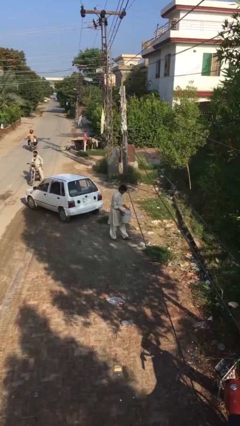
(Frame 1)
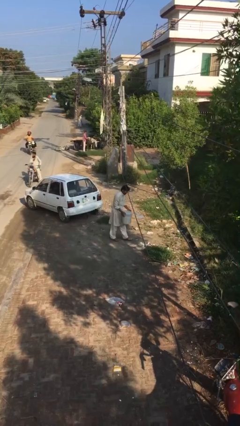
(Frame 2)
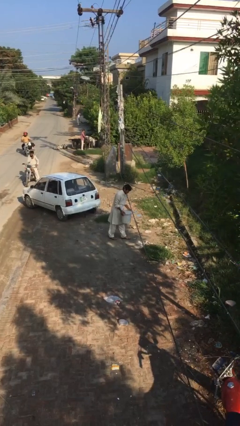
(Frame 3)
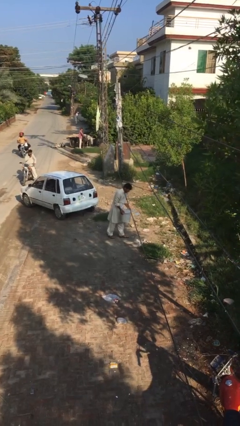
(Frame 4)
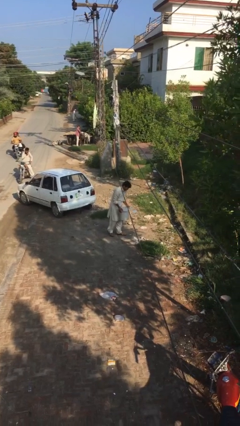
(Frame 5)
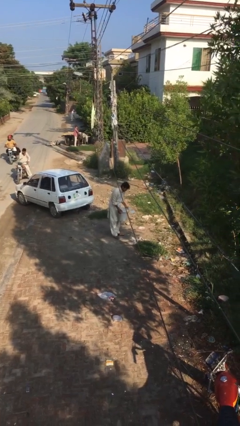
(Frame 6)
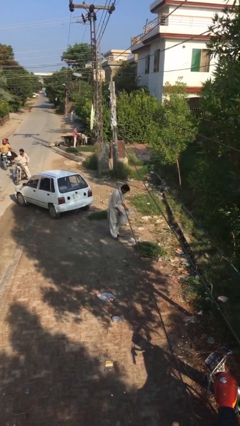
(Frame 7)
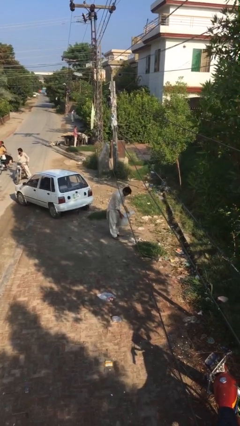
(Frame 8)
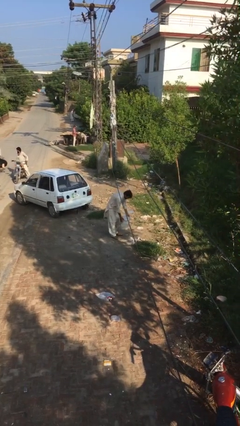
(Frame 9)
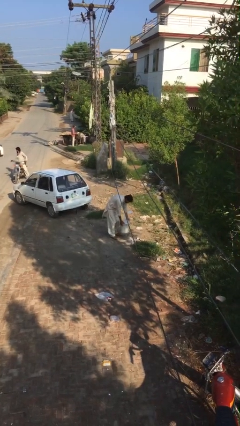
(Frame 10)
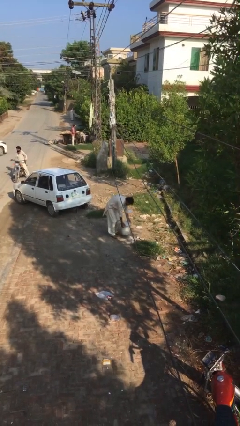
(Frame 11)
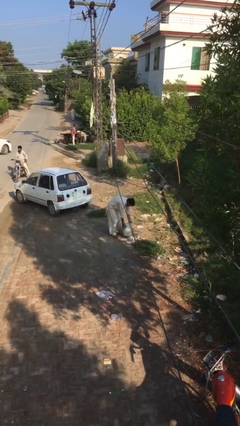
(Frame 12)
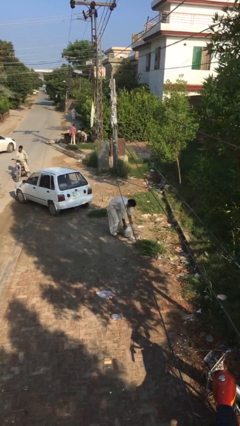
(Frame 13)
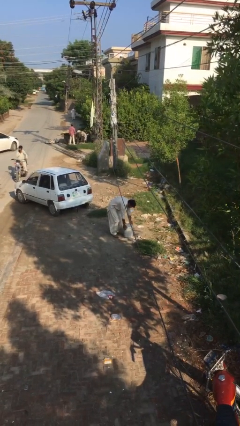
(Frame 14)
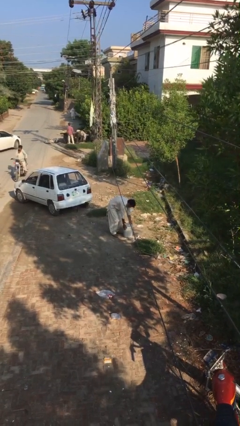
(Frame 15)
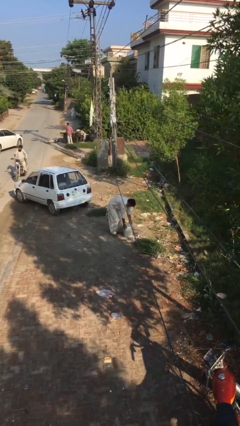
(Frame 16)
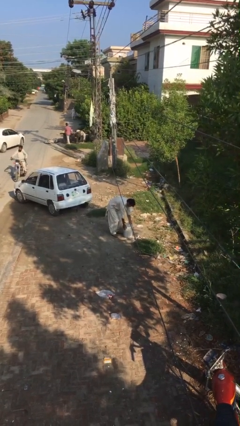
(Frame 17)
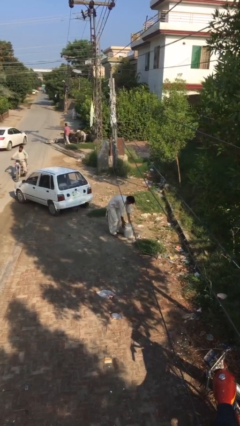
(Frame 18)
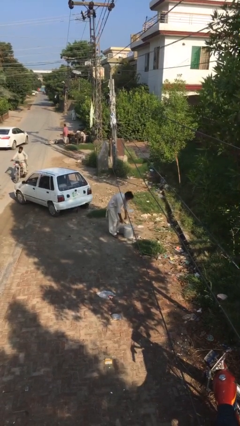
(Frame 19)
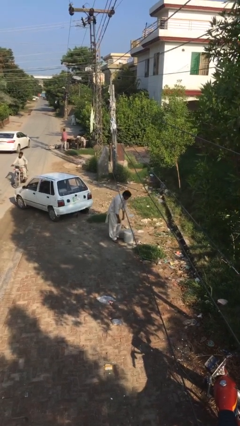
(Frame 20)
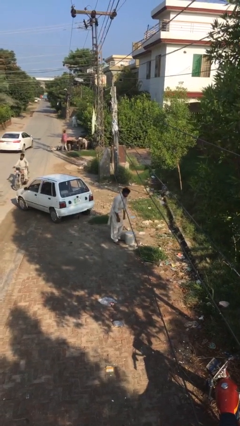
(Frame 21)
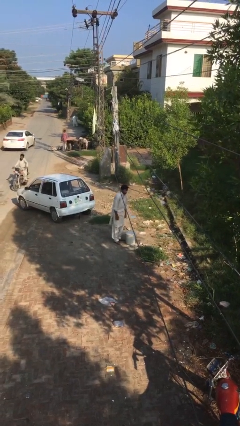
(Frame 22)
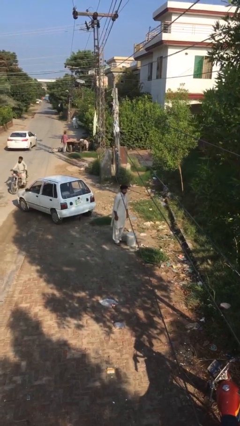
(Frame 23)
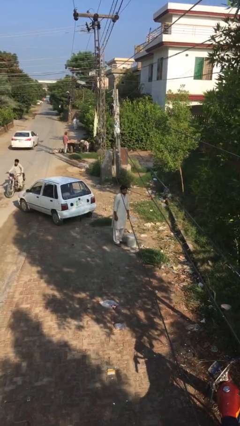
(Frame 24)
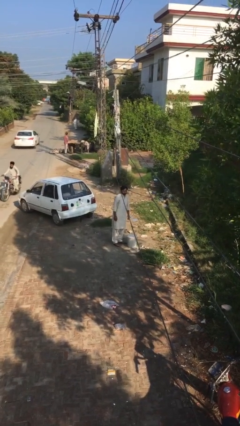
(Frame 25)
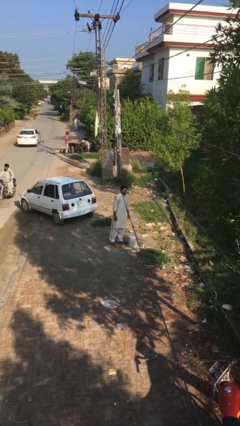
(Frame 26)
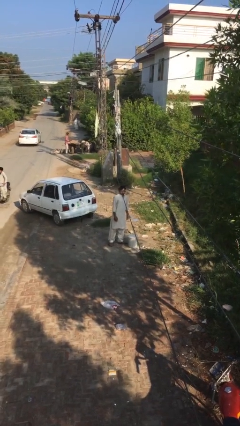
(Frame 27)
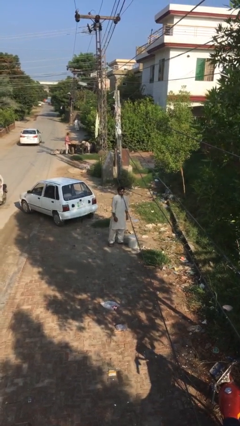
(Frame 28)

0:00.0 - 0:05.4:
person puts down object on floor

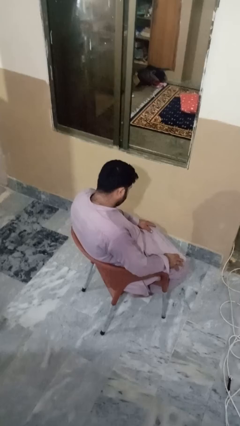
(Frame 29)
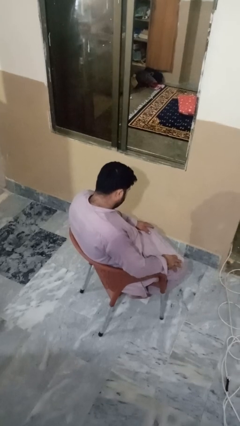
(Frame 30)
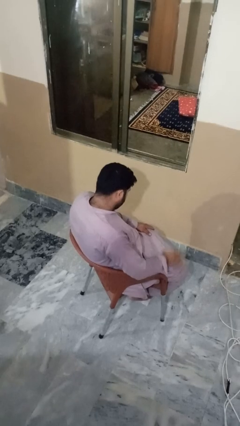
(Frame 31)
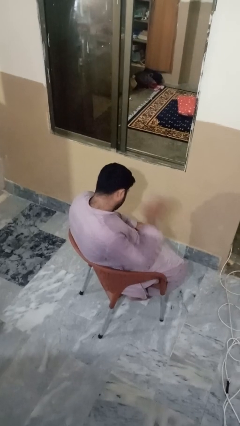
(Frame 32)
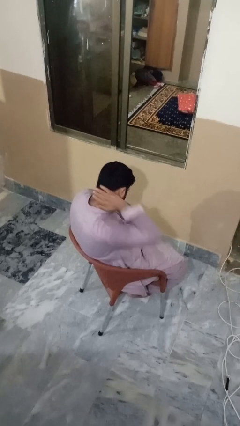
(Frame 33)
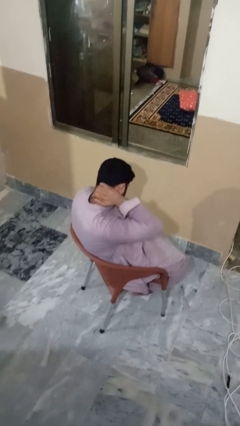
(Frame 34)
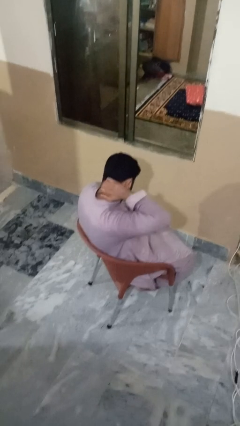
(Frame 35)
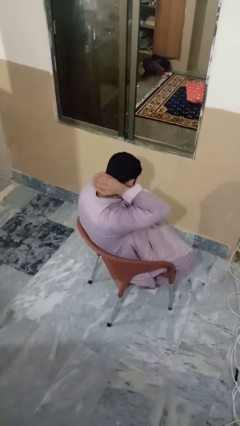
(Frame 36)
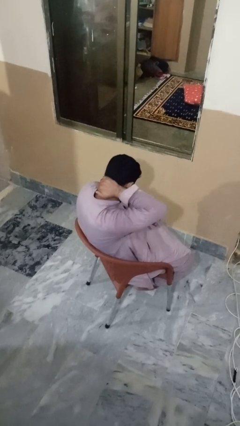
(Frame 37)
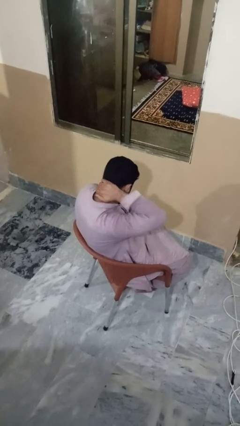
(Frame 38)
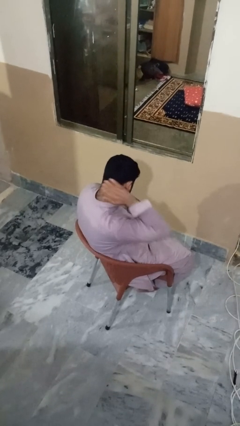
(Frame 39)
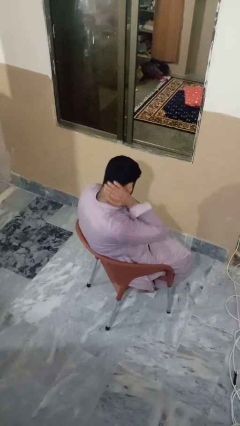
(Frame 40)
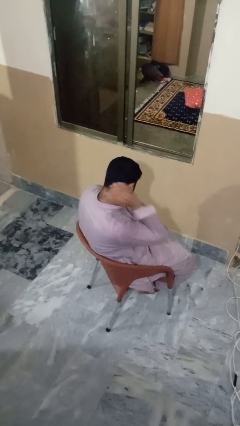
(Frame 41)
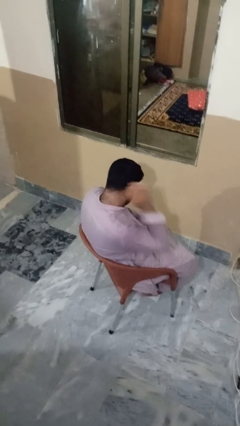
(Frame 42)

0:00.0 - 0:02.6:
person rubs neck

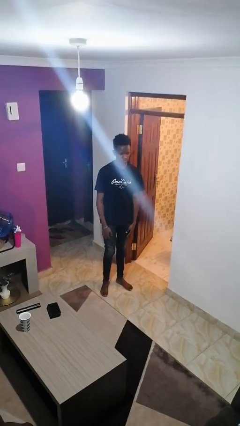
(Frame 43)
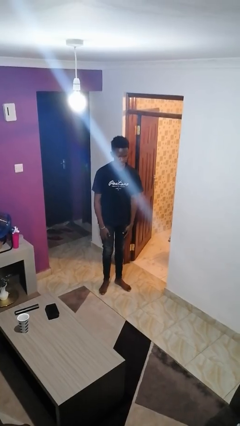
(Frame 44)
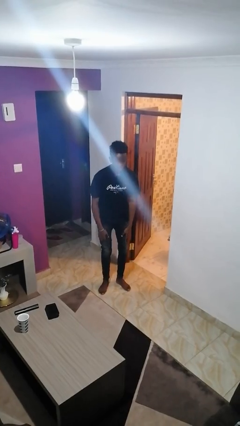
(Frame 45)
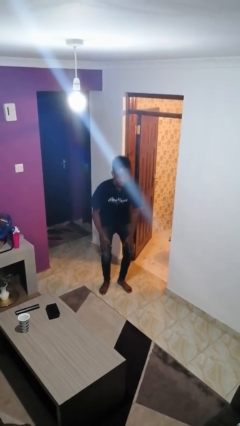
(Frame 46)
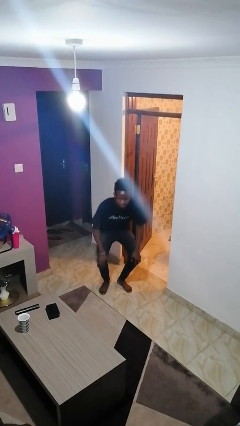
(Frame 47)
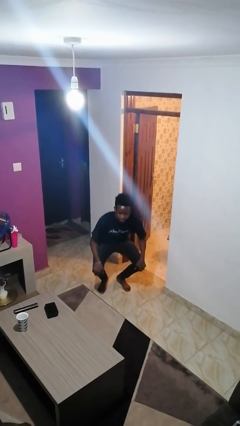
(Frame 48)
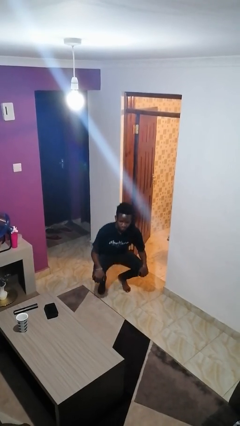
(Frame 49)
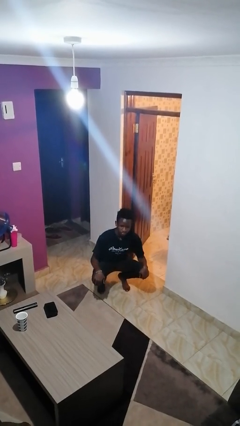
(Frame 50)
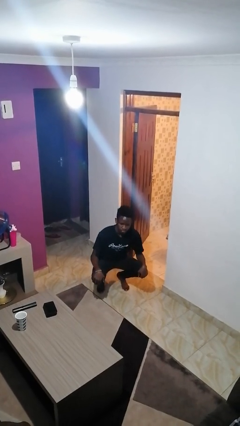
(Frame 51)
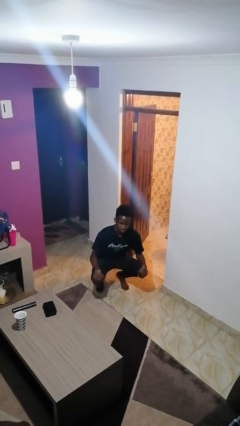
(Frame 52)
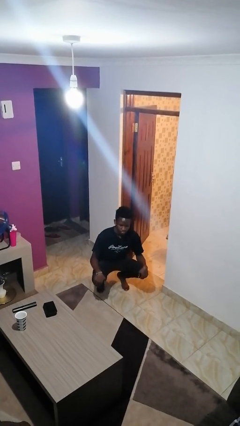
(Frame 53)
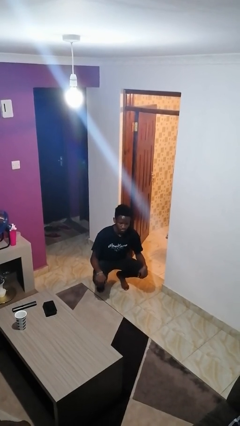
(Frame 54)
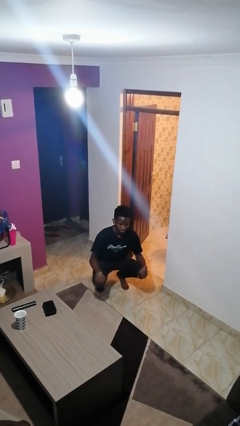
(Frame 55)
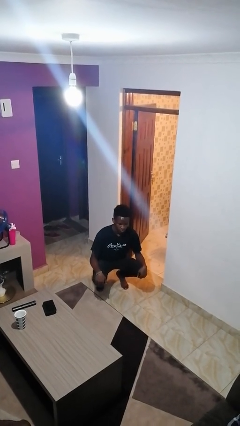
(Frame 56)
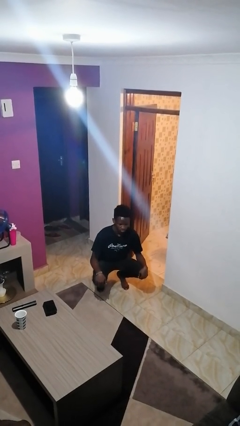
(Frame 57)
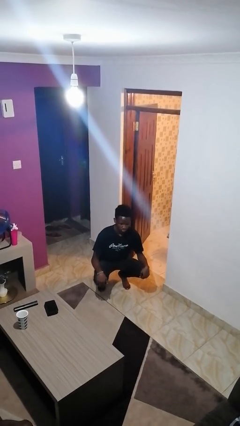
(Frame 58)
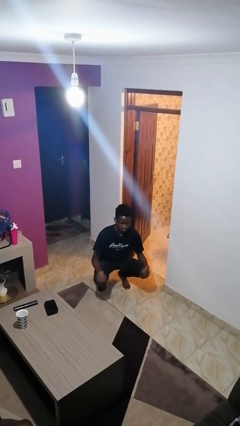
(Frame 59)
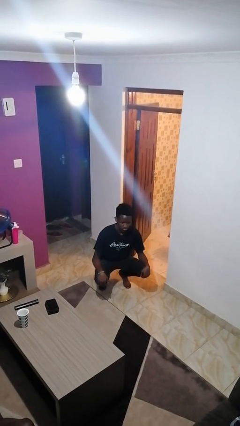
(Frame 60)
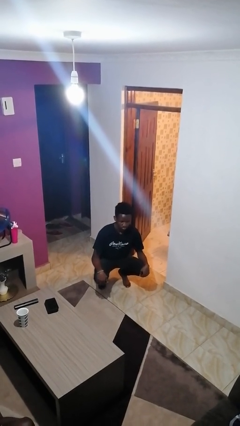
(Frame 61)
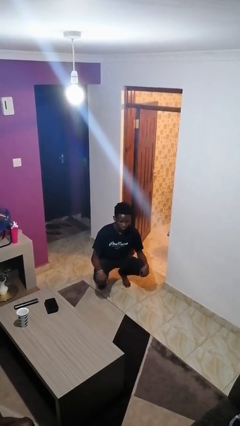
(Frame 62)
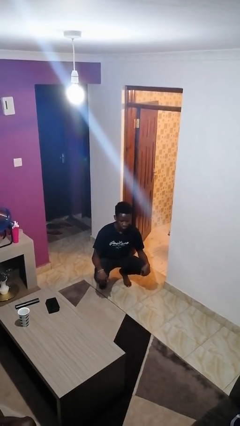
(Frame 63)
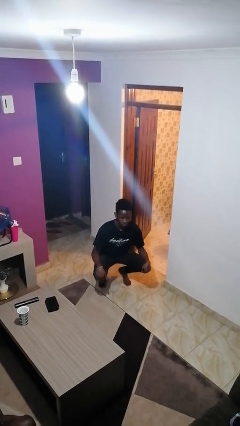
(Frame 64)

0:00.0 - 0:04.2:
person squats

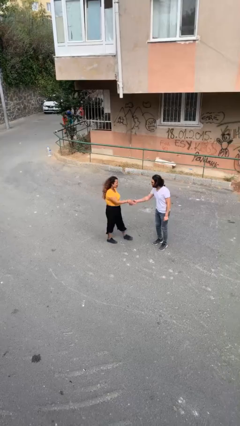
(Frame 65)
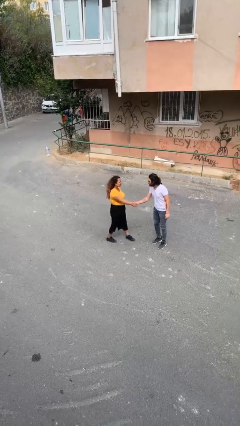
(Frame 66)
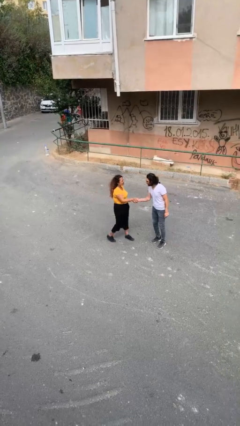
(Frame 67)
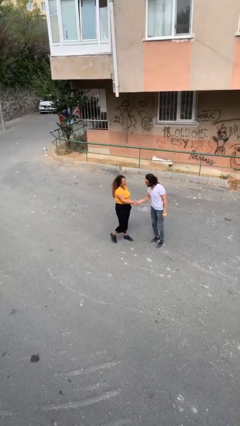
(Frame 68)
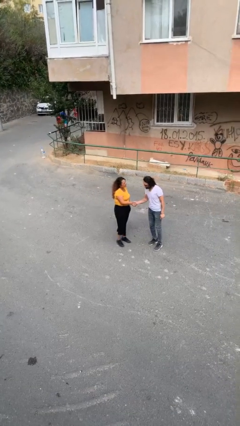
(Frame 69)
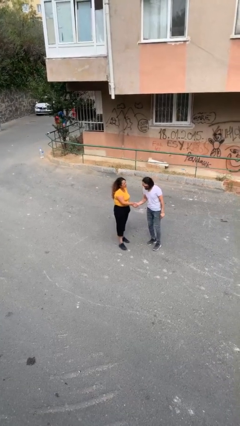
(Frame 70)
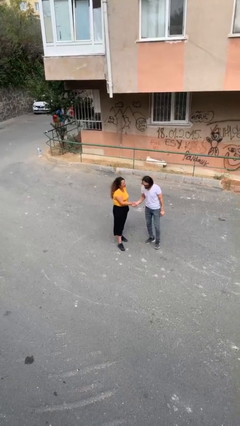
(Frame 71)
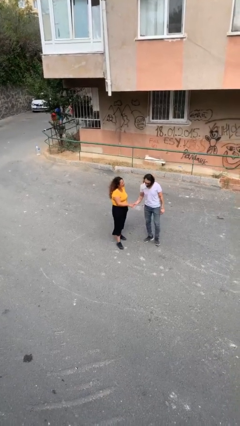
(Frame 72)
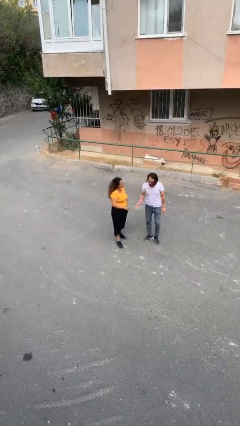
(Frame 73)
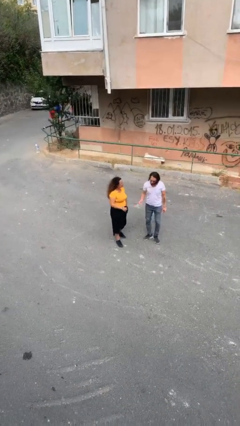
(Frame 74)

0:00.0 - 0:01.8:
person shakes hand

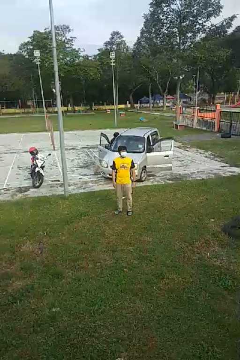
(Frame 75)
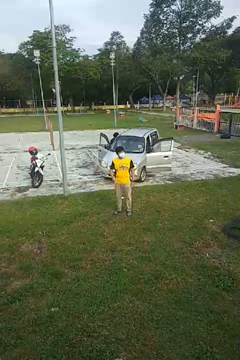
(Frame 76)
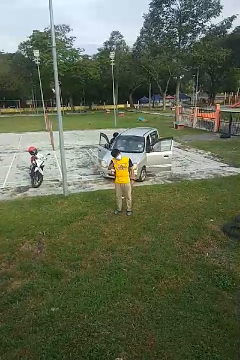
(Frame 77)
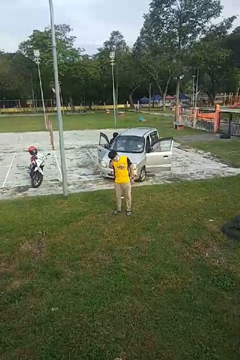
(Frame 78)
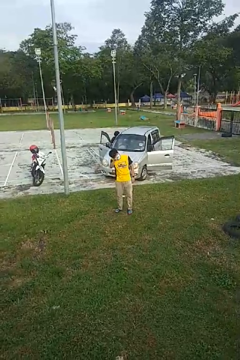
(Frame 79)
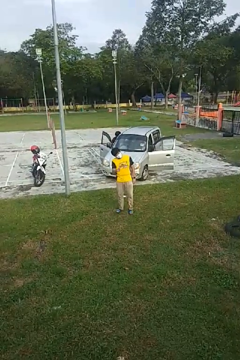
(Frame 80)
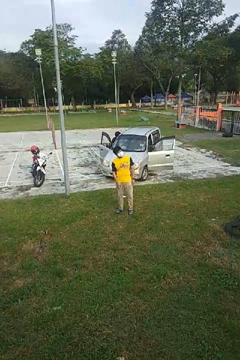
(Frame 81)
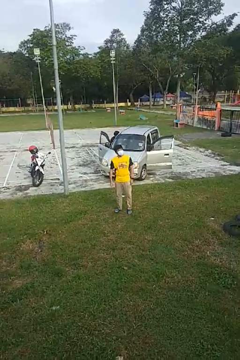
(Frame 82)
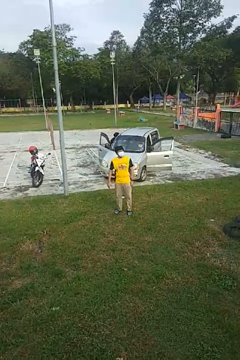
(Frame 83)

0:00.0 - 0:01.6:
person points at person

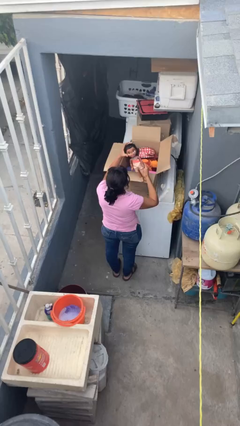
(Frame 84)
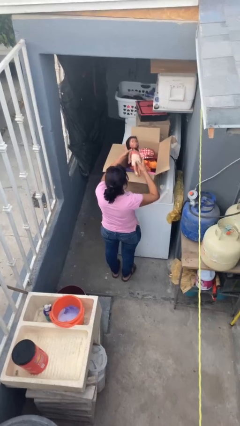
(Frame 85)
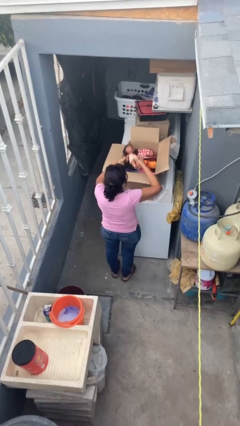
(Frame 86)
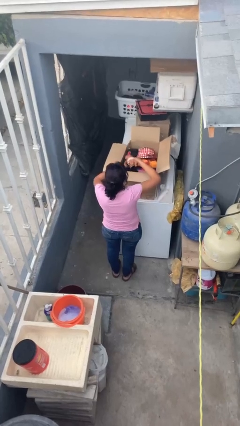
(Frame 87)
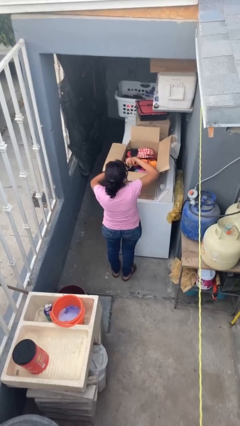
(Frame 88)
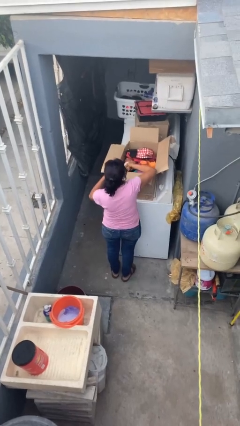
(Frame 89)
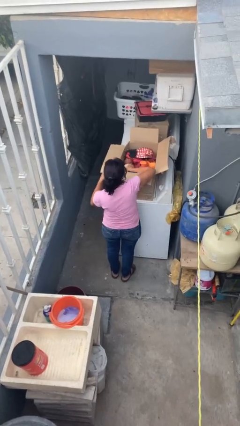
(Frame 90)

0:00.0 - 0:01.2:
person puts object into box

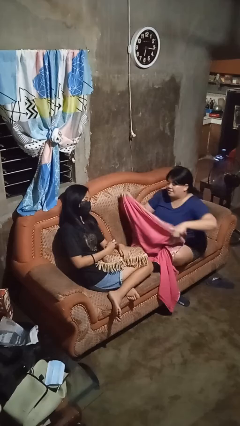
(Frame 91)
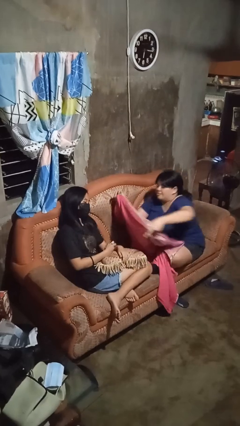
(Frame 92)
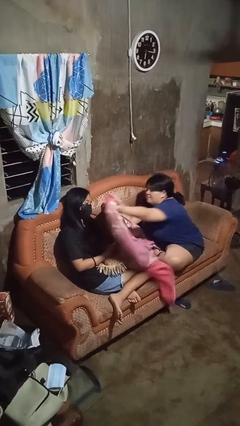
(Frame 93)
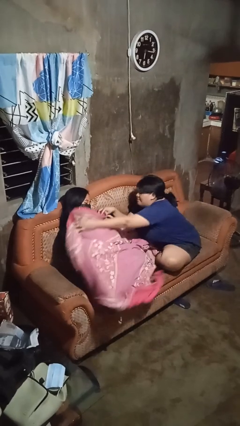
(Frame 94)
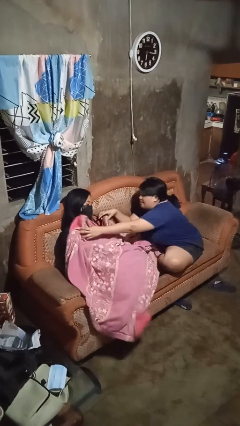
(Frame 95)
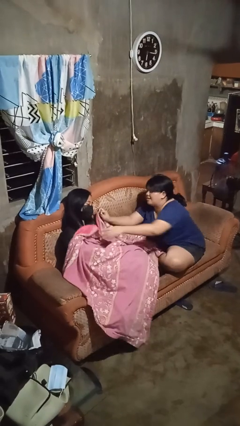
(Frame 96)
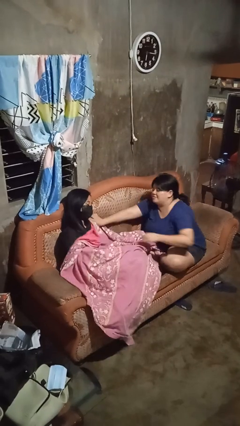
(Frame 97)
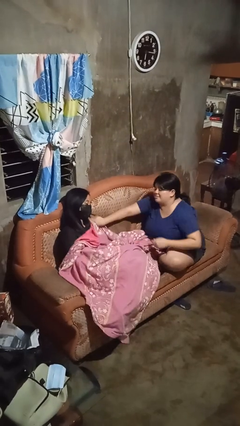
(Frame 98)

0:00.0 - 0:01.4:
person covers friend with blanket
